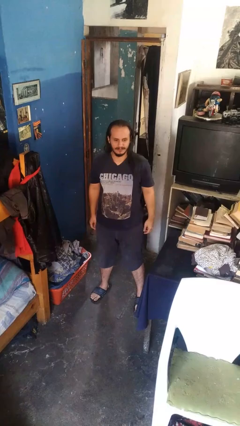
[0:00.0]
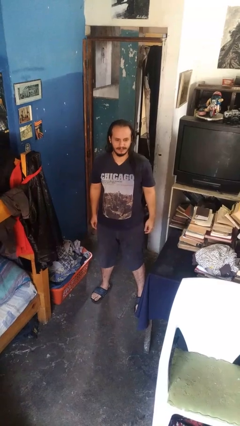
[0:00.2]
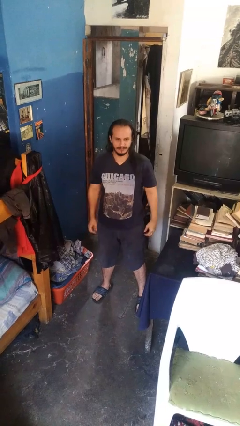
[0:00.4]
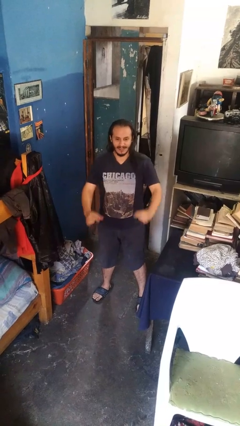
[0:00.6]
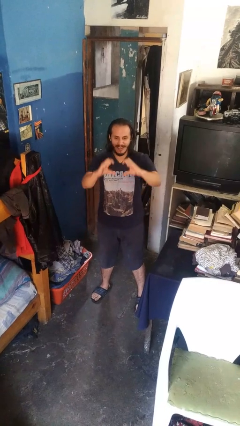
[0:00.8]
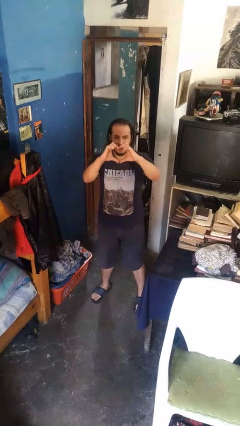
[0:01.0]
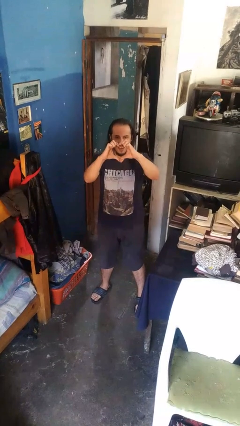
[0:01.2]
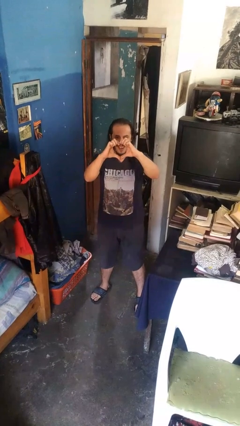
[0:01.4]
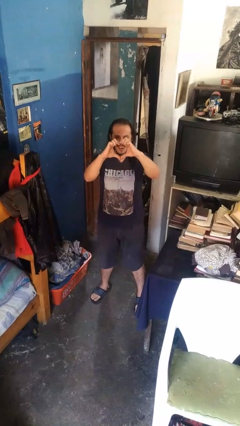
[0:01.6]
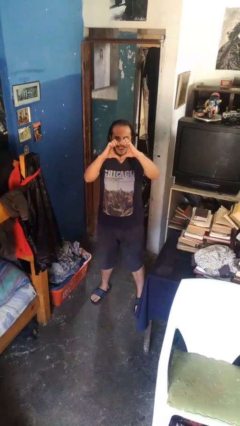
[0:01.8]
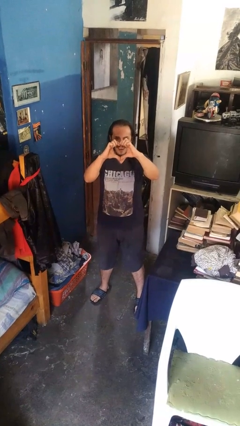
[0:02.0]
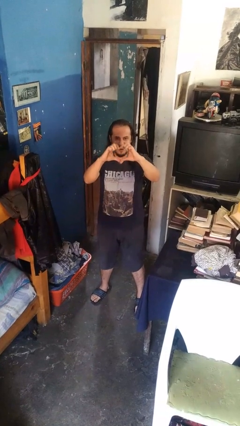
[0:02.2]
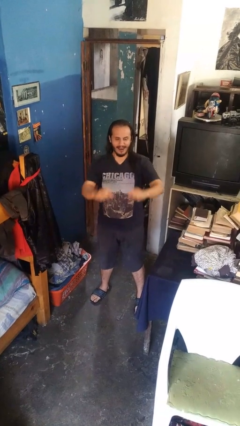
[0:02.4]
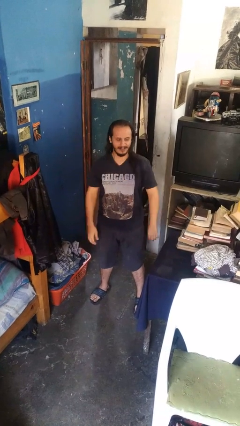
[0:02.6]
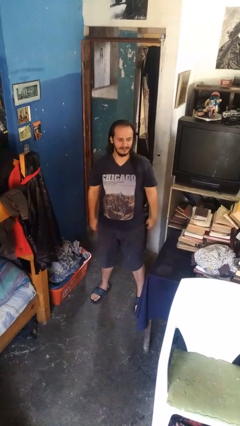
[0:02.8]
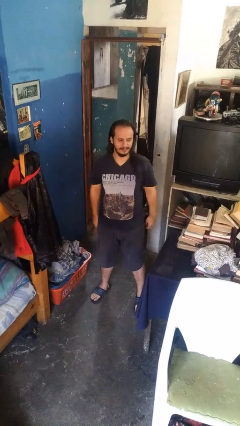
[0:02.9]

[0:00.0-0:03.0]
person gestures heart

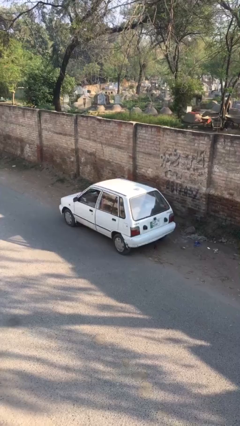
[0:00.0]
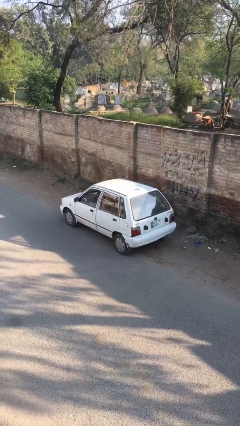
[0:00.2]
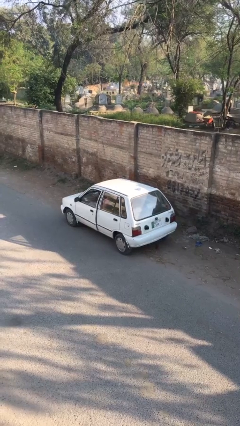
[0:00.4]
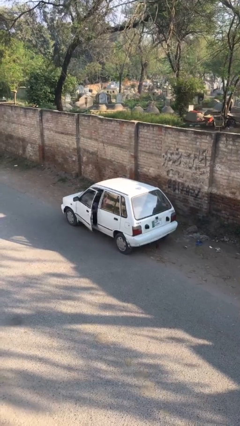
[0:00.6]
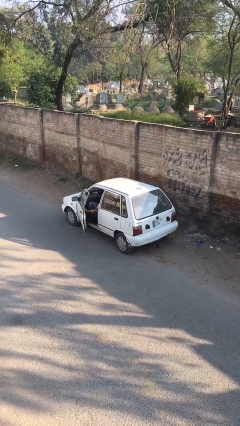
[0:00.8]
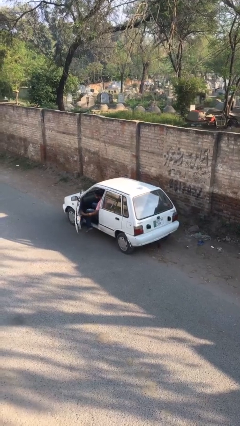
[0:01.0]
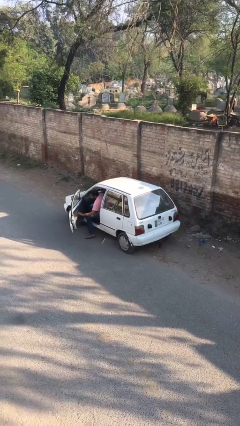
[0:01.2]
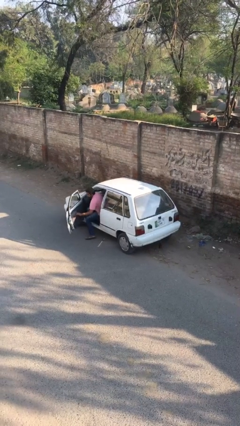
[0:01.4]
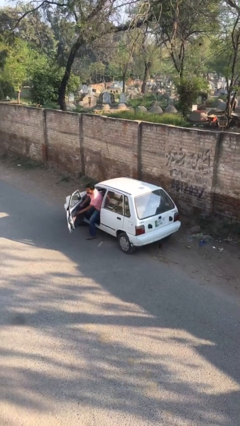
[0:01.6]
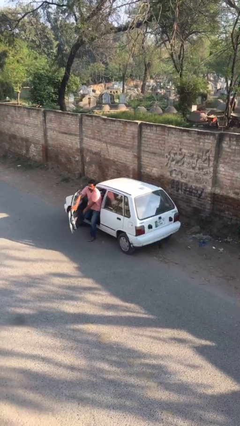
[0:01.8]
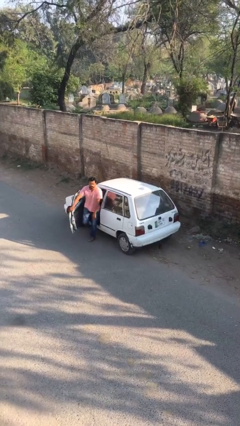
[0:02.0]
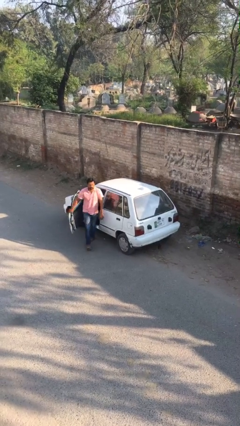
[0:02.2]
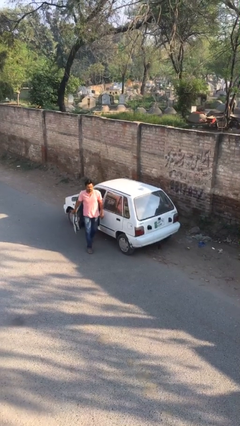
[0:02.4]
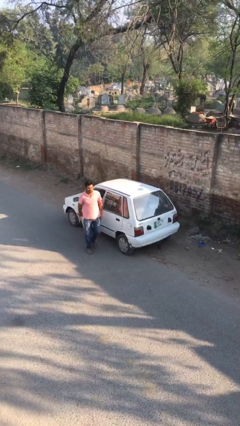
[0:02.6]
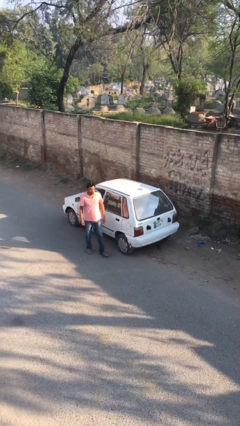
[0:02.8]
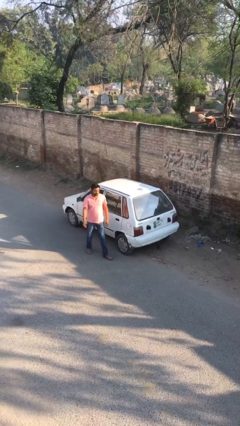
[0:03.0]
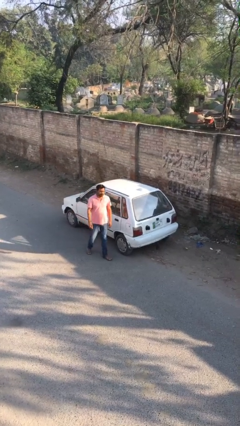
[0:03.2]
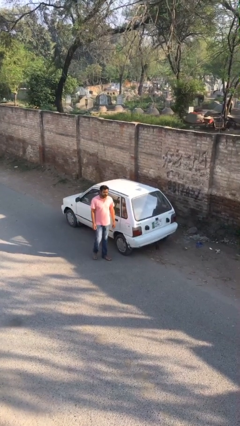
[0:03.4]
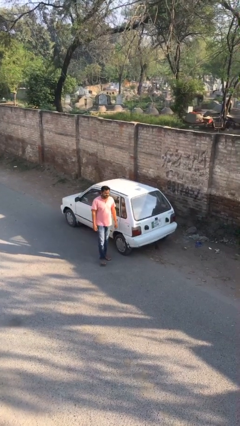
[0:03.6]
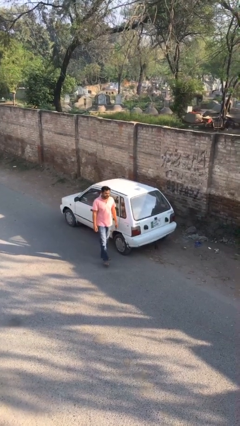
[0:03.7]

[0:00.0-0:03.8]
car drops off person

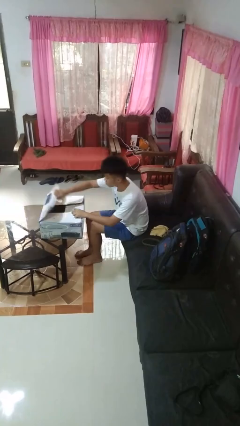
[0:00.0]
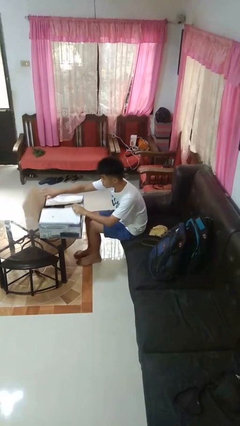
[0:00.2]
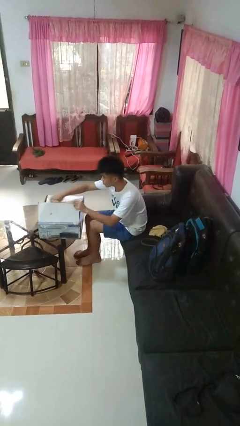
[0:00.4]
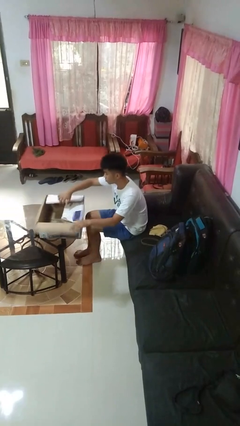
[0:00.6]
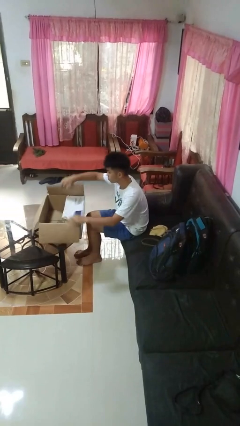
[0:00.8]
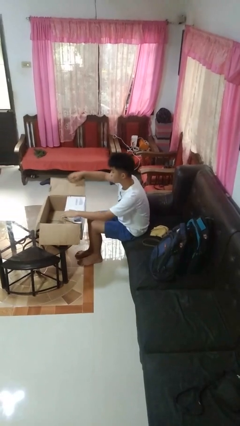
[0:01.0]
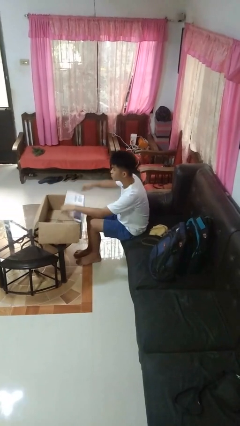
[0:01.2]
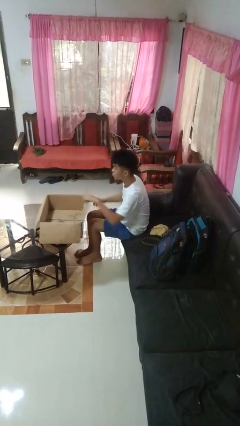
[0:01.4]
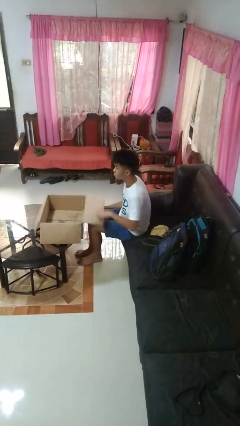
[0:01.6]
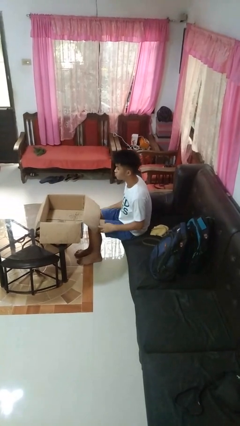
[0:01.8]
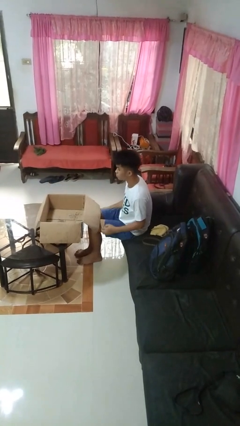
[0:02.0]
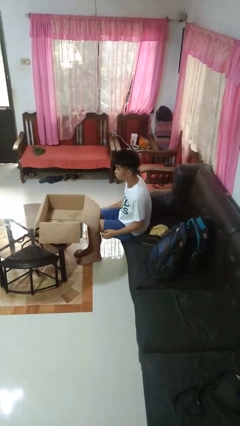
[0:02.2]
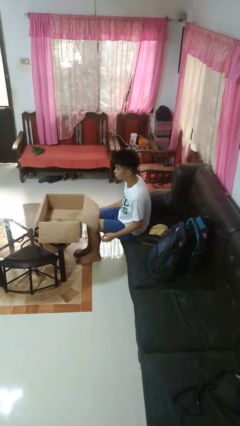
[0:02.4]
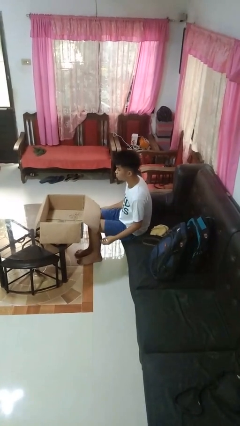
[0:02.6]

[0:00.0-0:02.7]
person opens box

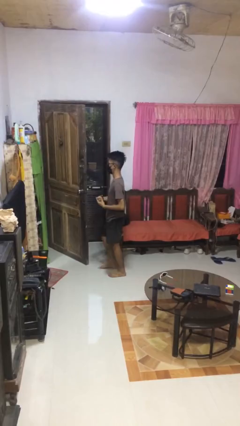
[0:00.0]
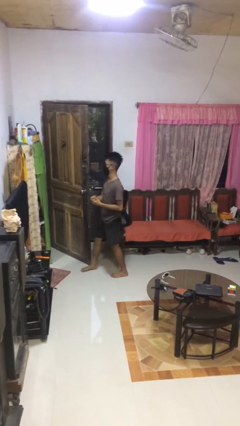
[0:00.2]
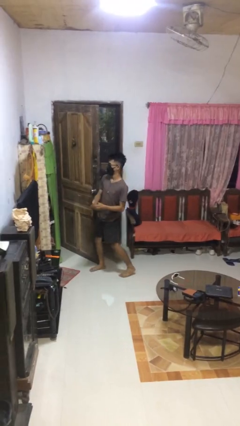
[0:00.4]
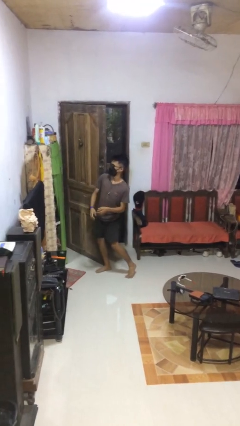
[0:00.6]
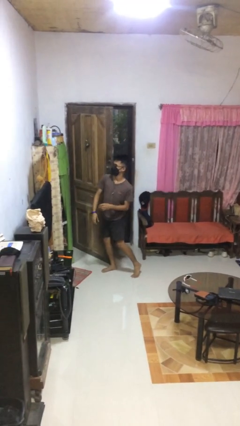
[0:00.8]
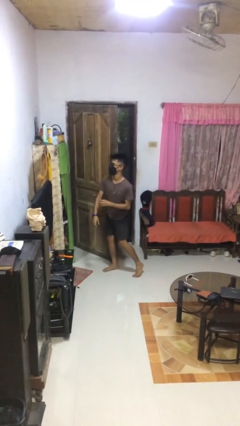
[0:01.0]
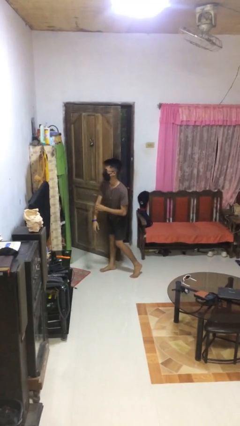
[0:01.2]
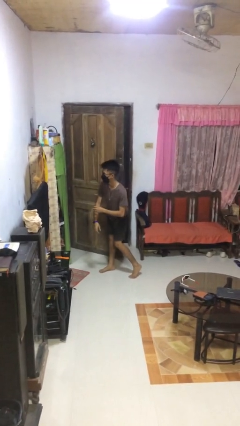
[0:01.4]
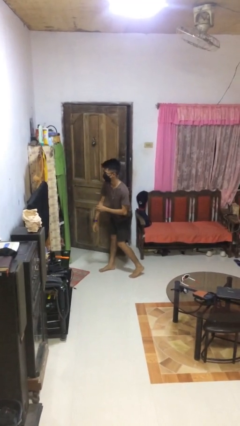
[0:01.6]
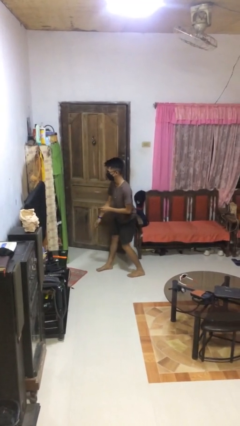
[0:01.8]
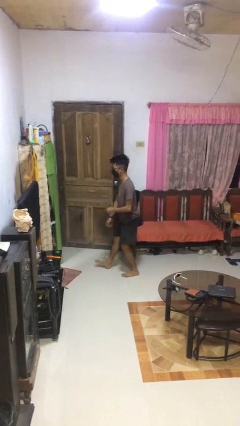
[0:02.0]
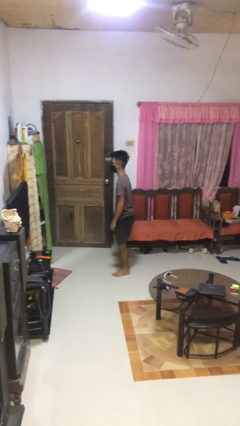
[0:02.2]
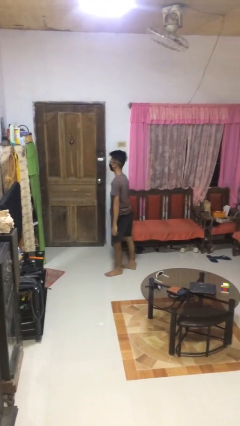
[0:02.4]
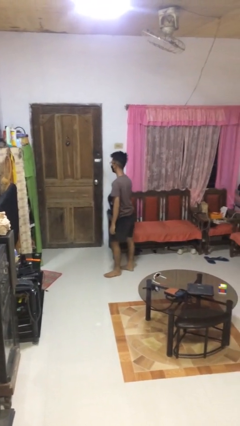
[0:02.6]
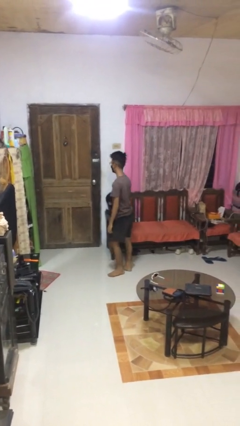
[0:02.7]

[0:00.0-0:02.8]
person closes door with hip

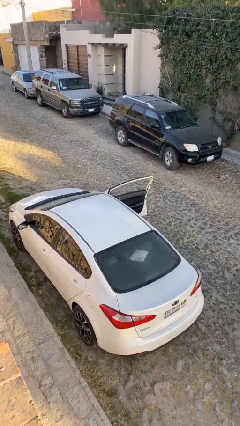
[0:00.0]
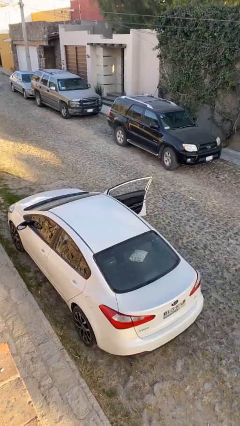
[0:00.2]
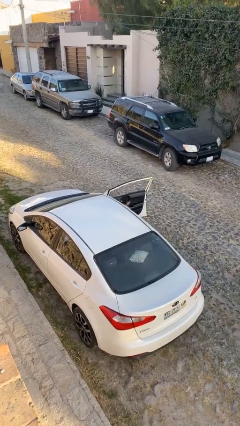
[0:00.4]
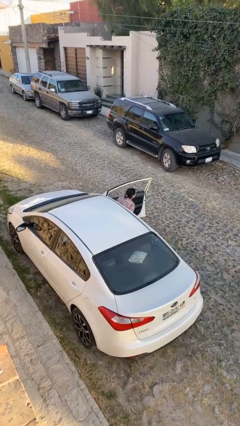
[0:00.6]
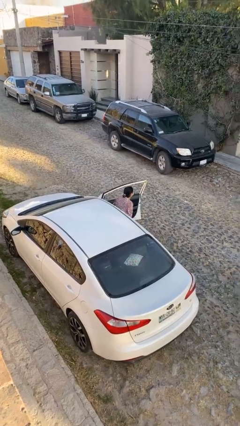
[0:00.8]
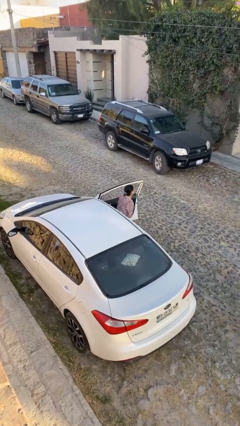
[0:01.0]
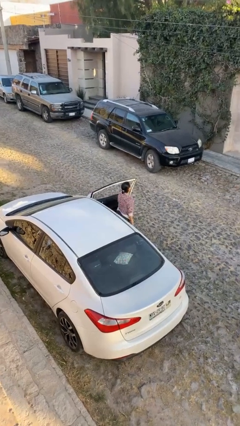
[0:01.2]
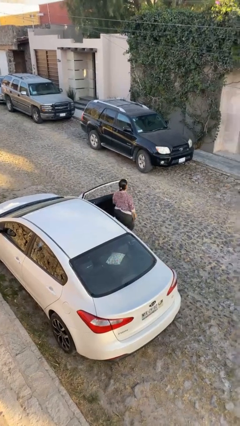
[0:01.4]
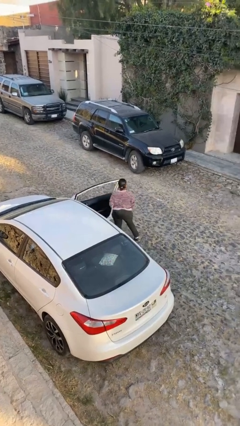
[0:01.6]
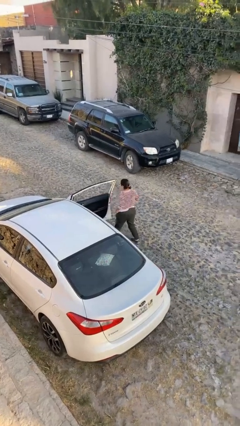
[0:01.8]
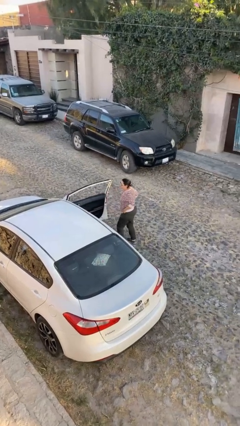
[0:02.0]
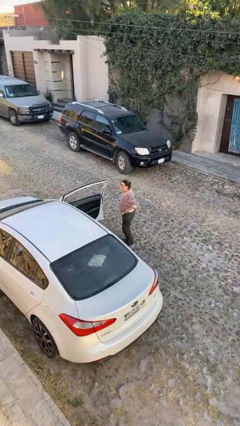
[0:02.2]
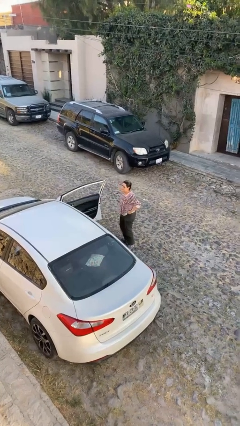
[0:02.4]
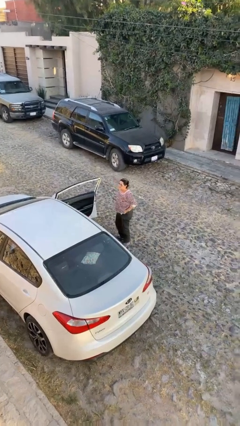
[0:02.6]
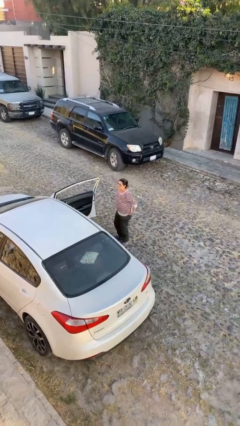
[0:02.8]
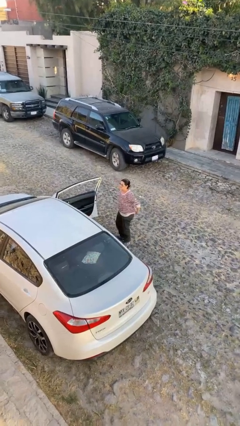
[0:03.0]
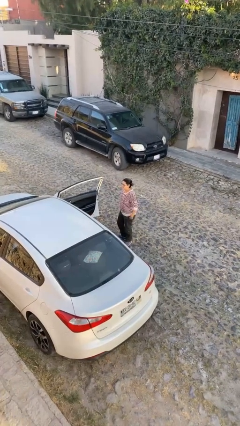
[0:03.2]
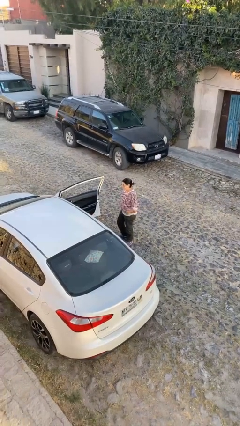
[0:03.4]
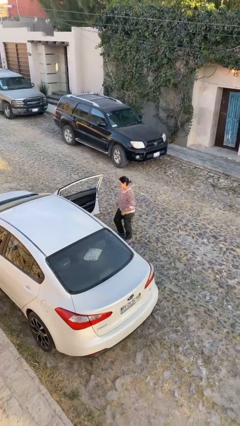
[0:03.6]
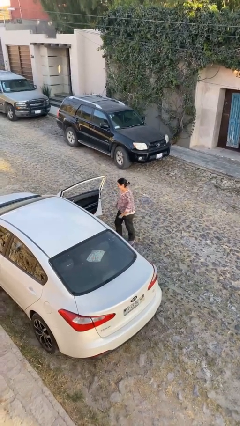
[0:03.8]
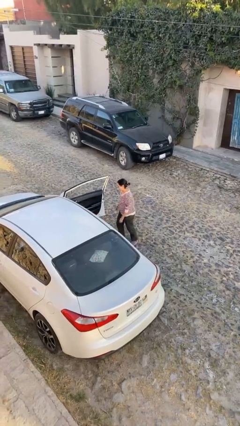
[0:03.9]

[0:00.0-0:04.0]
person exits car

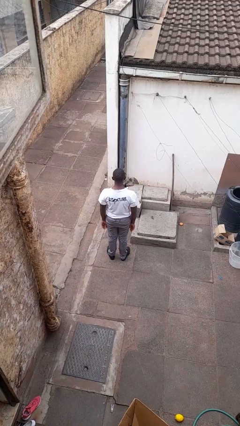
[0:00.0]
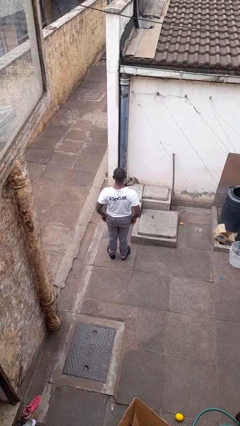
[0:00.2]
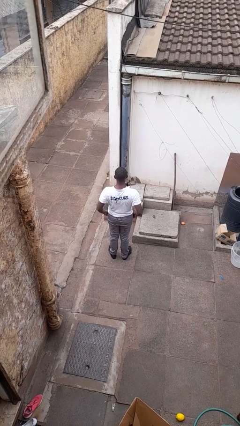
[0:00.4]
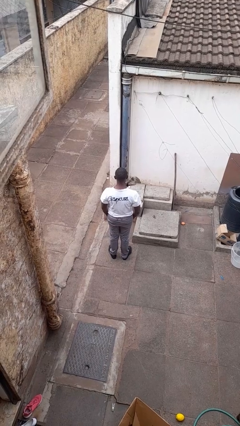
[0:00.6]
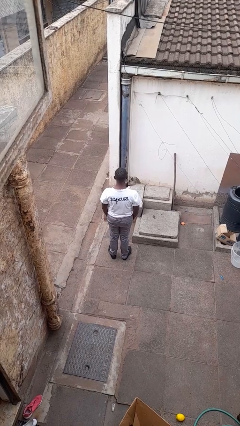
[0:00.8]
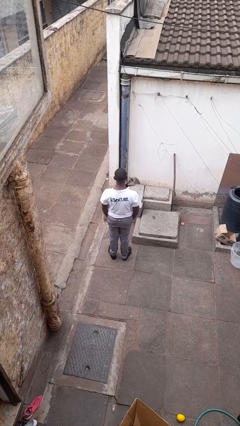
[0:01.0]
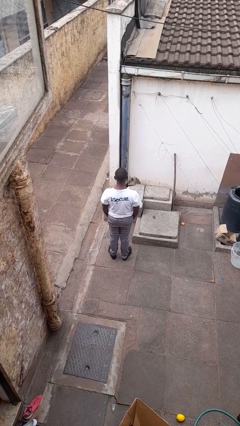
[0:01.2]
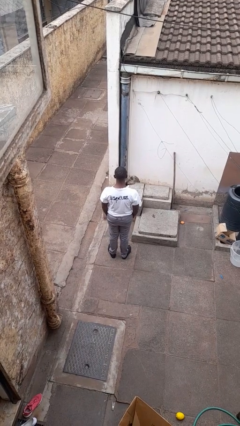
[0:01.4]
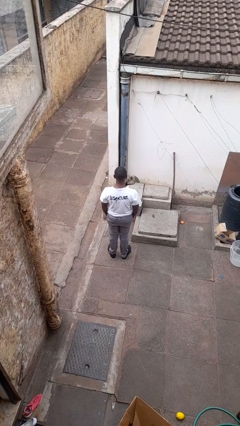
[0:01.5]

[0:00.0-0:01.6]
person puts hands in back pockets
